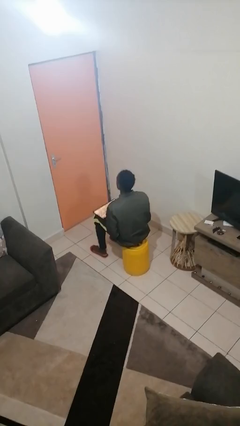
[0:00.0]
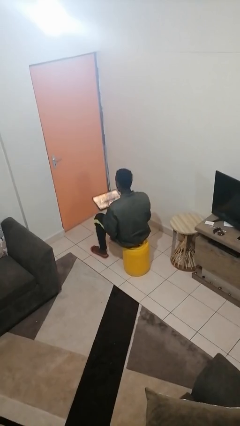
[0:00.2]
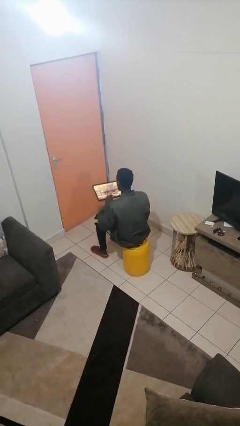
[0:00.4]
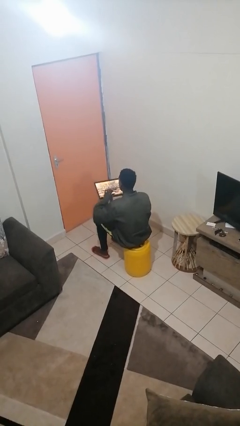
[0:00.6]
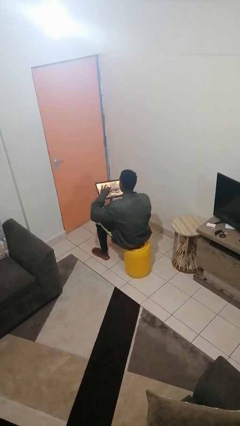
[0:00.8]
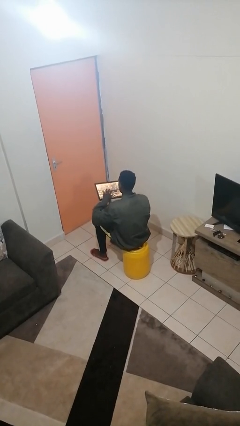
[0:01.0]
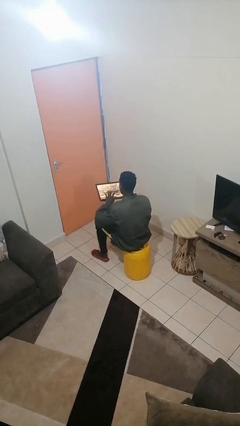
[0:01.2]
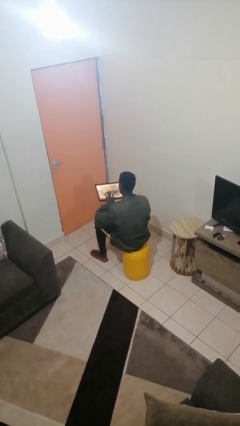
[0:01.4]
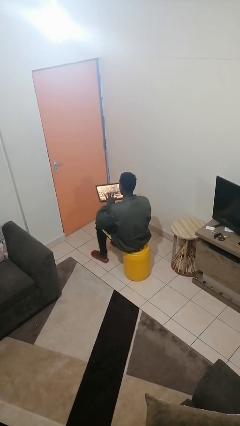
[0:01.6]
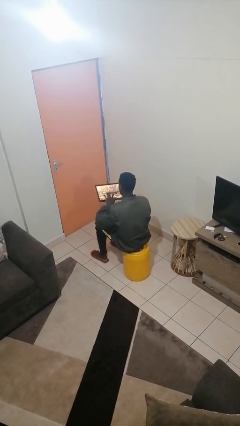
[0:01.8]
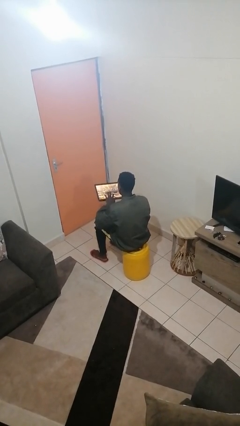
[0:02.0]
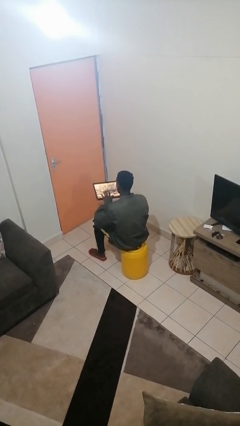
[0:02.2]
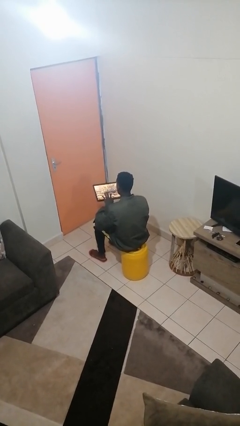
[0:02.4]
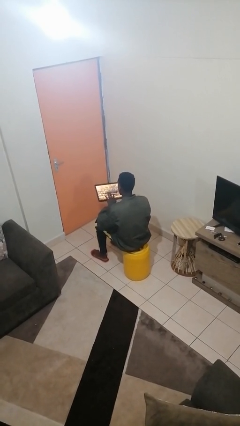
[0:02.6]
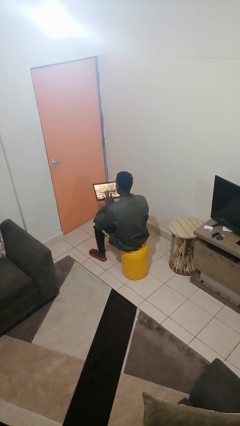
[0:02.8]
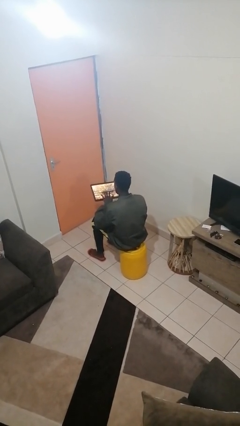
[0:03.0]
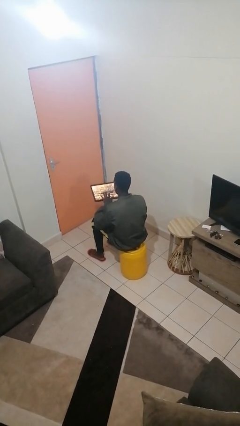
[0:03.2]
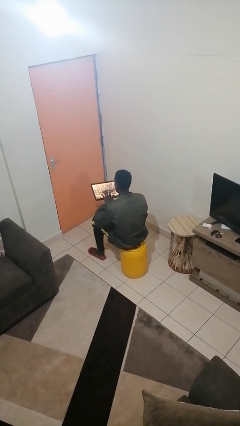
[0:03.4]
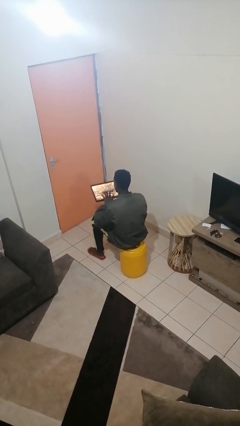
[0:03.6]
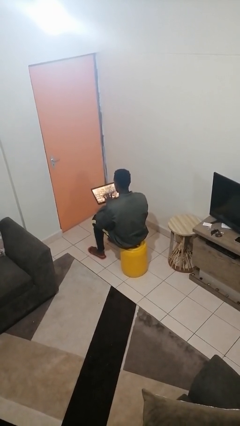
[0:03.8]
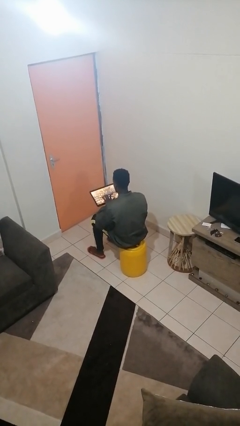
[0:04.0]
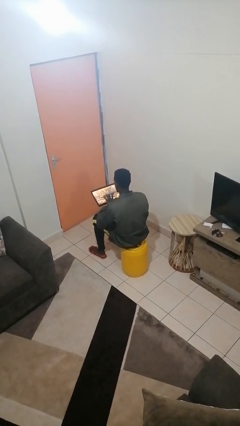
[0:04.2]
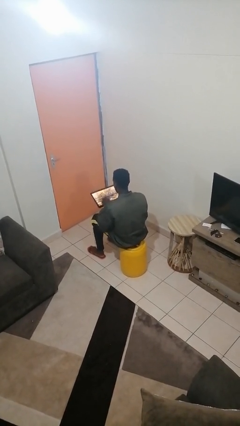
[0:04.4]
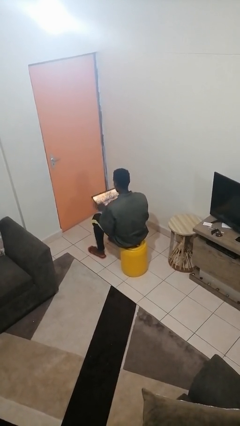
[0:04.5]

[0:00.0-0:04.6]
person interacts with tablet

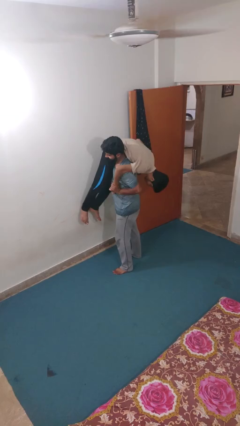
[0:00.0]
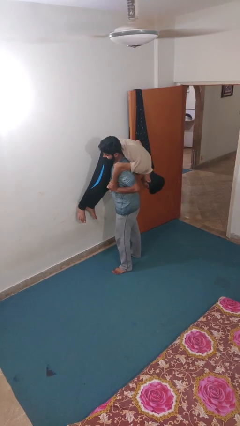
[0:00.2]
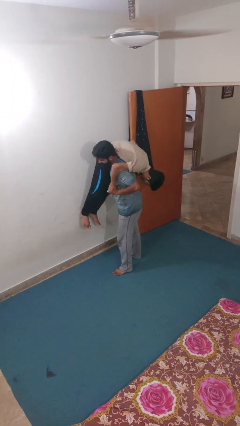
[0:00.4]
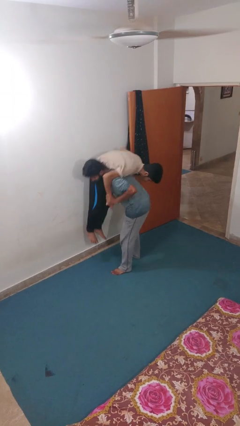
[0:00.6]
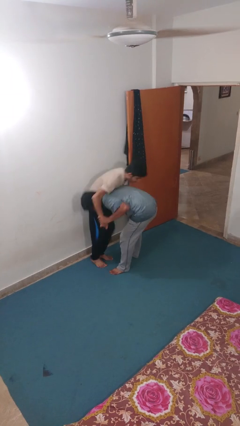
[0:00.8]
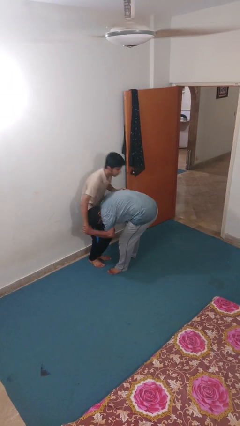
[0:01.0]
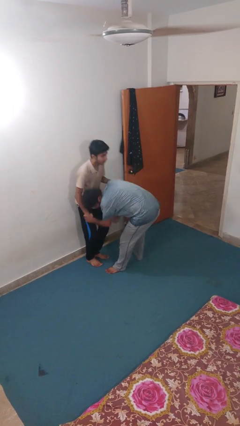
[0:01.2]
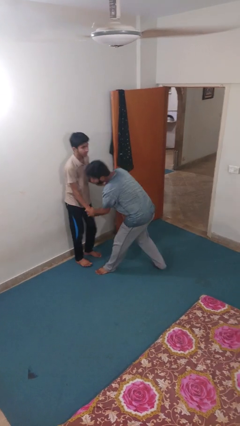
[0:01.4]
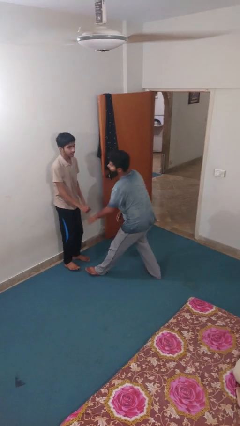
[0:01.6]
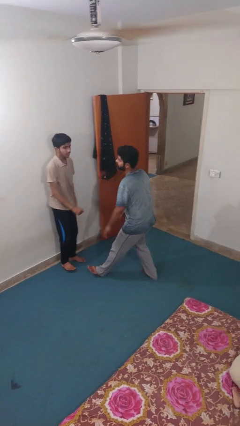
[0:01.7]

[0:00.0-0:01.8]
person puts down person

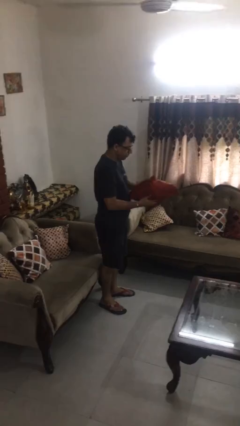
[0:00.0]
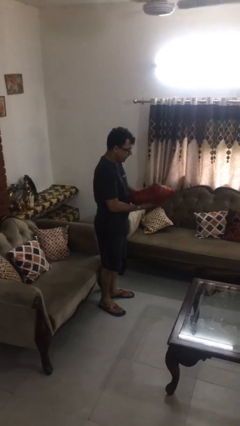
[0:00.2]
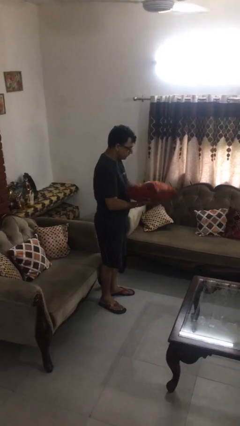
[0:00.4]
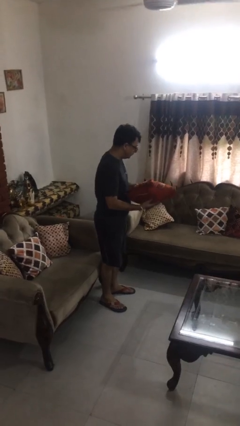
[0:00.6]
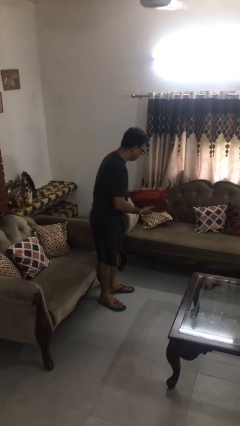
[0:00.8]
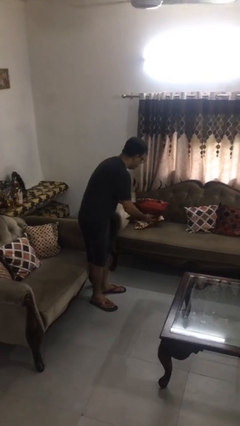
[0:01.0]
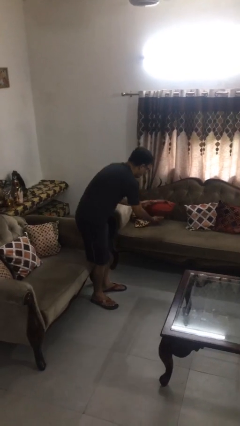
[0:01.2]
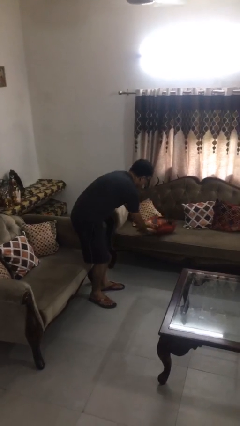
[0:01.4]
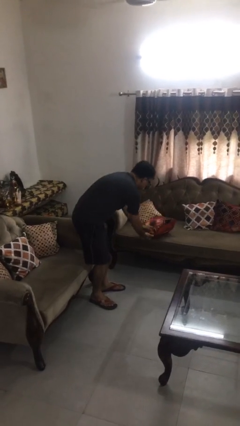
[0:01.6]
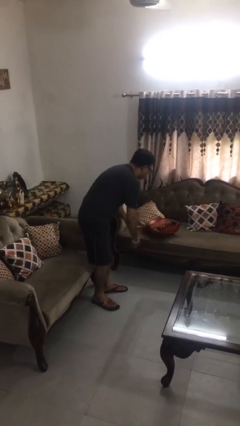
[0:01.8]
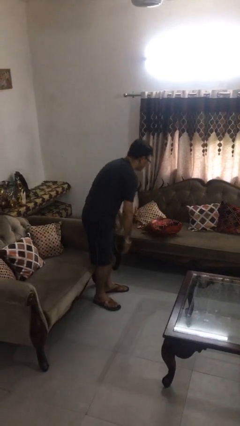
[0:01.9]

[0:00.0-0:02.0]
person puts down object on couch

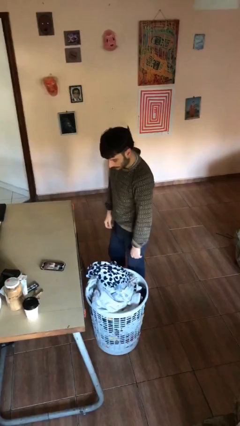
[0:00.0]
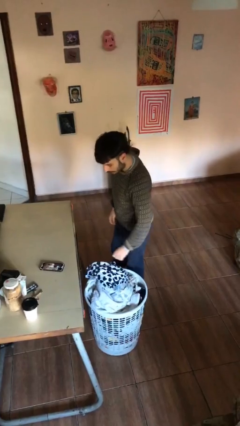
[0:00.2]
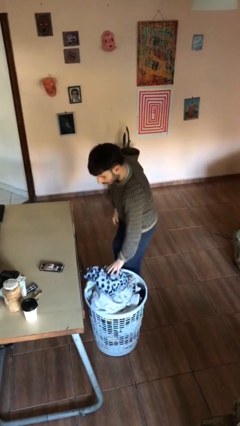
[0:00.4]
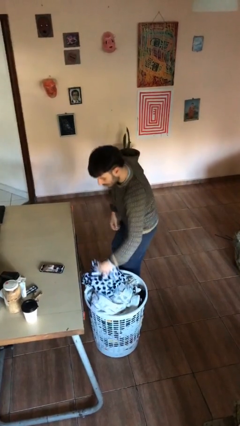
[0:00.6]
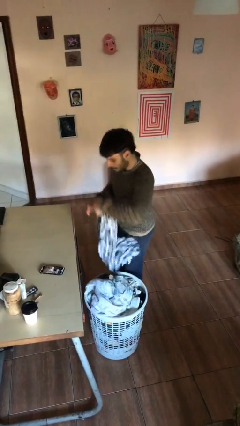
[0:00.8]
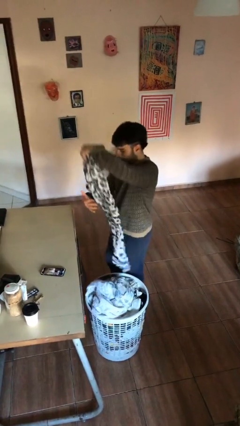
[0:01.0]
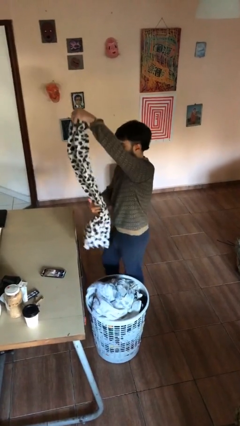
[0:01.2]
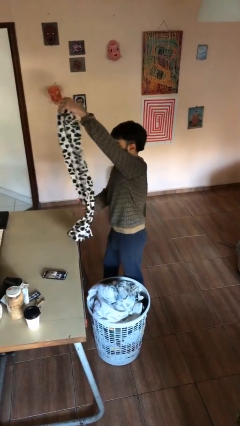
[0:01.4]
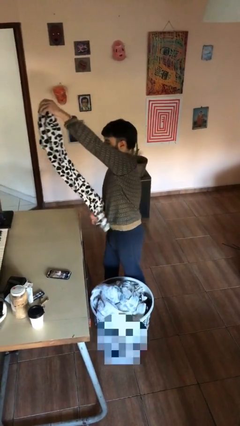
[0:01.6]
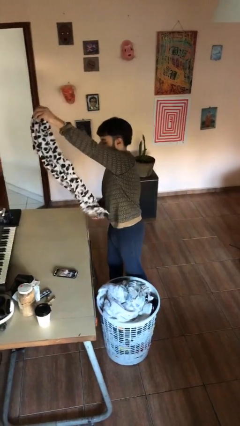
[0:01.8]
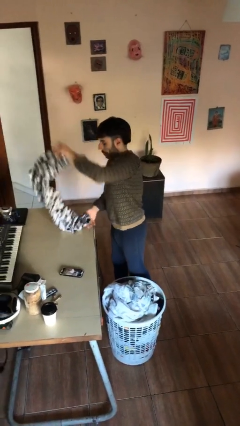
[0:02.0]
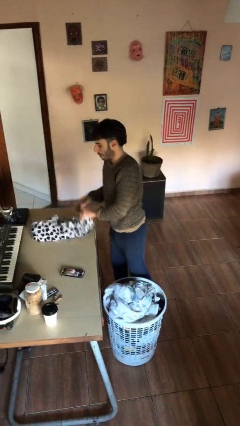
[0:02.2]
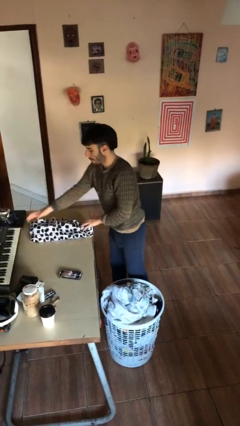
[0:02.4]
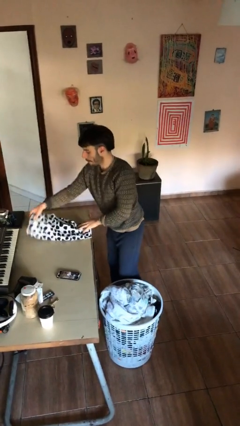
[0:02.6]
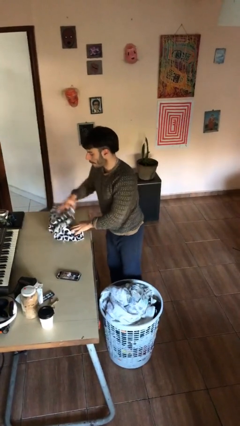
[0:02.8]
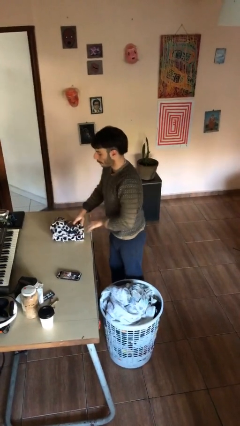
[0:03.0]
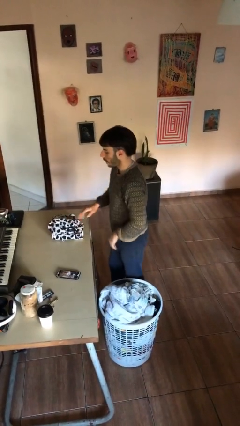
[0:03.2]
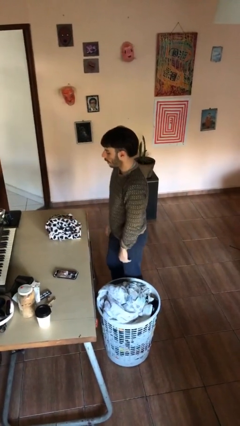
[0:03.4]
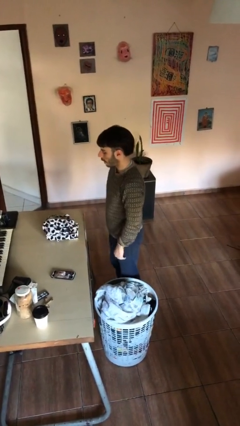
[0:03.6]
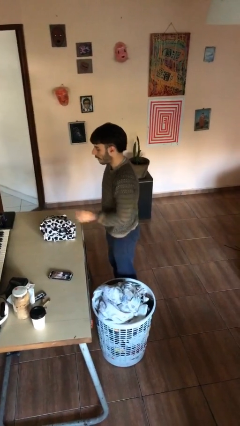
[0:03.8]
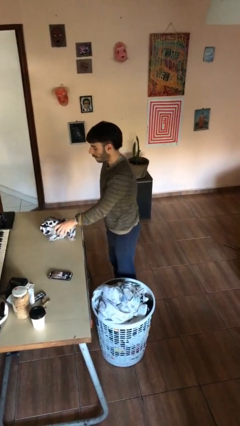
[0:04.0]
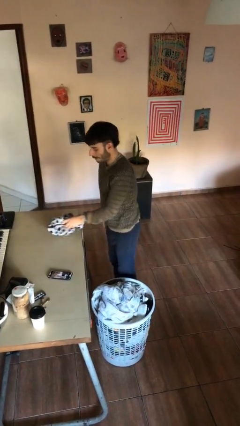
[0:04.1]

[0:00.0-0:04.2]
person folds pants

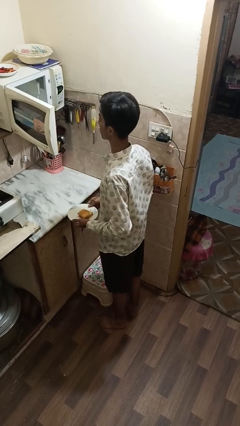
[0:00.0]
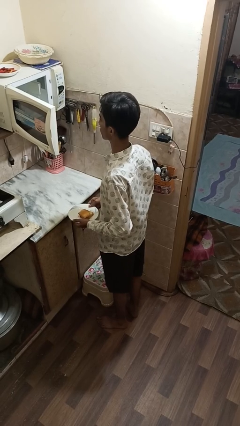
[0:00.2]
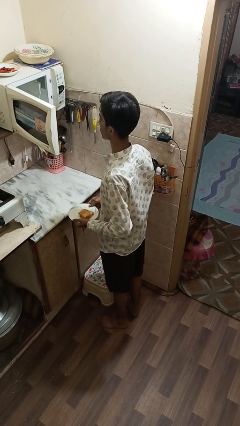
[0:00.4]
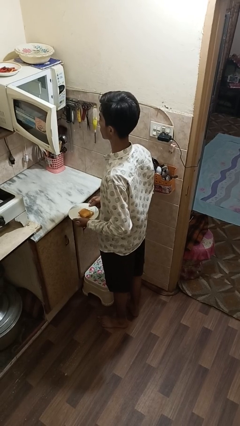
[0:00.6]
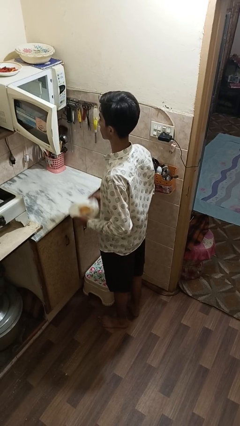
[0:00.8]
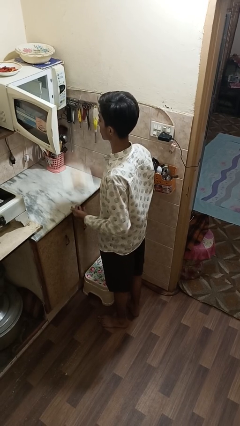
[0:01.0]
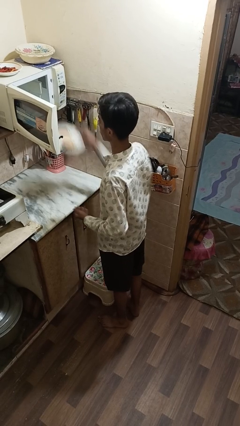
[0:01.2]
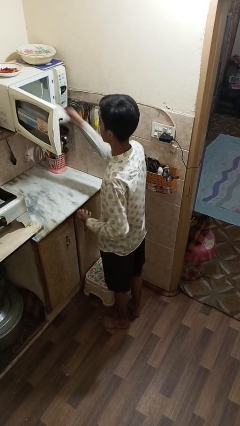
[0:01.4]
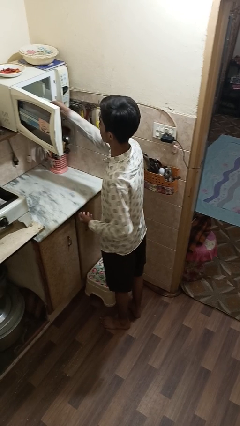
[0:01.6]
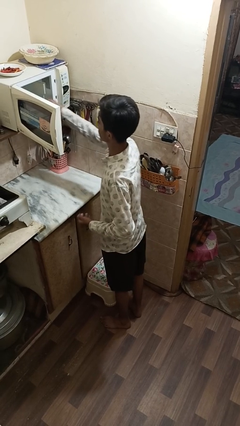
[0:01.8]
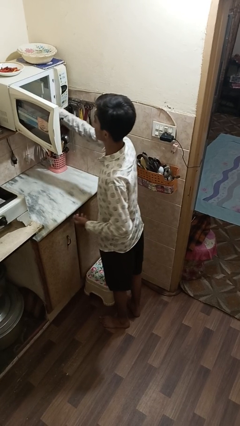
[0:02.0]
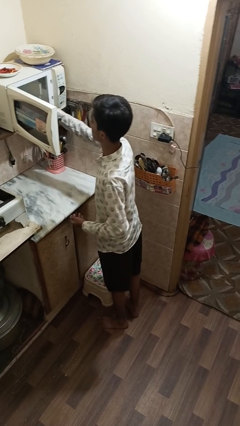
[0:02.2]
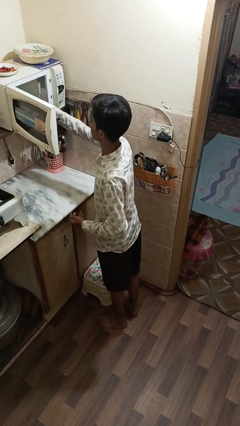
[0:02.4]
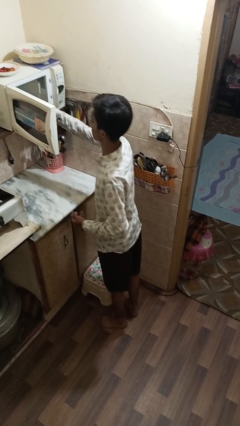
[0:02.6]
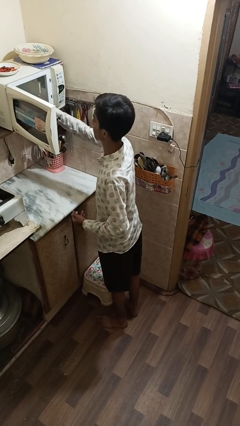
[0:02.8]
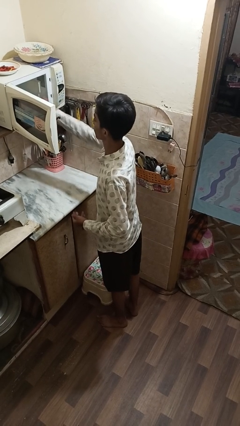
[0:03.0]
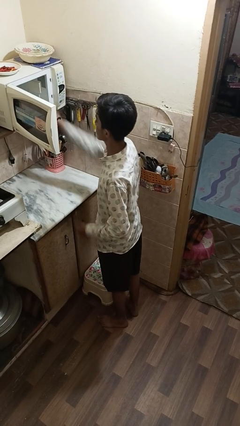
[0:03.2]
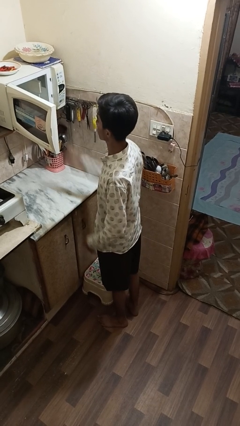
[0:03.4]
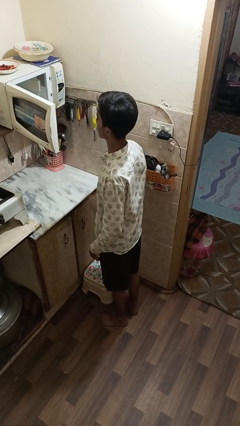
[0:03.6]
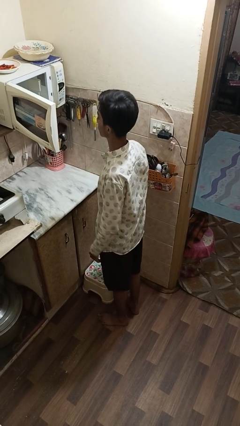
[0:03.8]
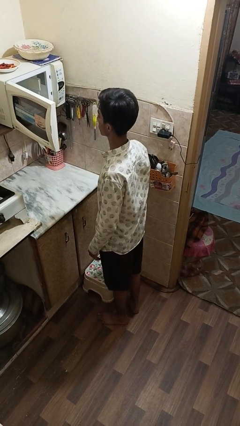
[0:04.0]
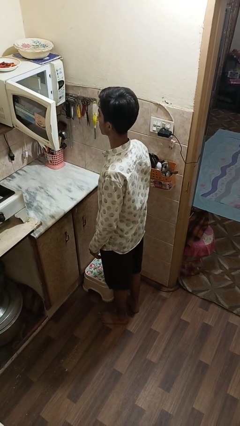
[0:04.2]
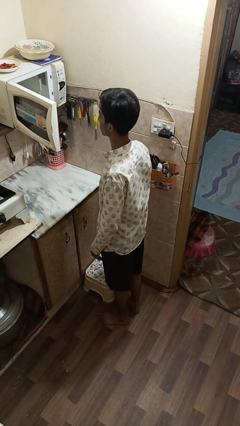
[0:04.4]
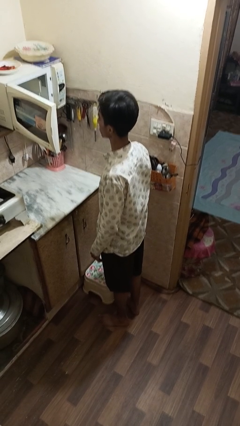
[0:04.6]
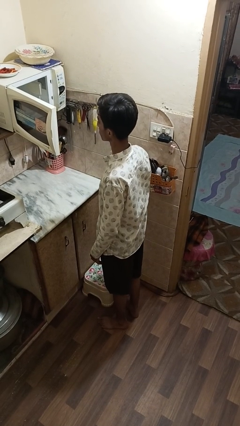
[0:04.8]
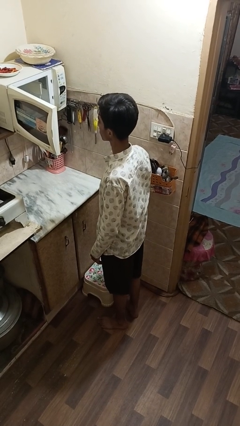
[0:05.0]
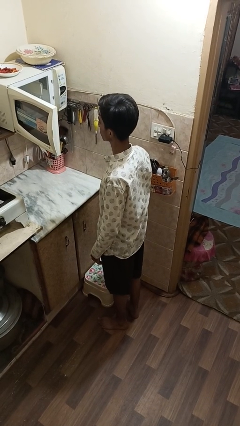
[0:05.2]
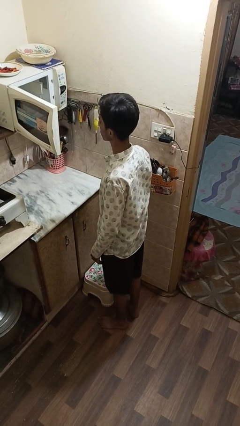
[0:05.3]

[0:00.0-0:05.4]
person puts object into microwave
